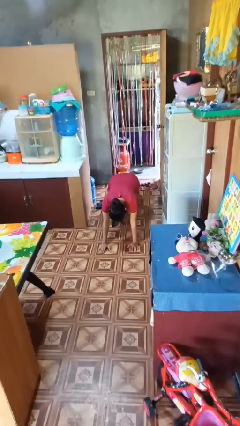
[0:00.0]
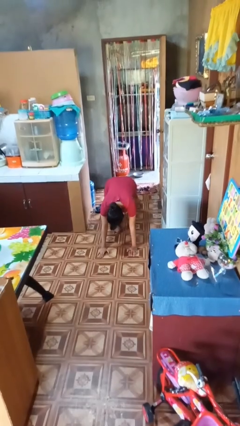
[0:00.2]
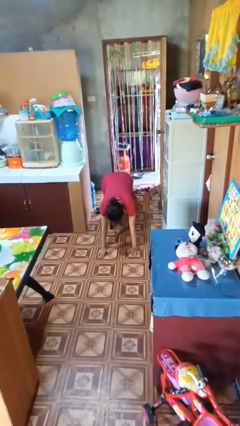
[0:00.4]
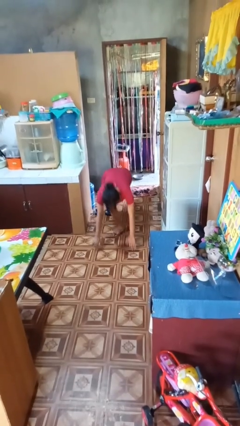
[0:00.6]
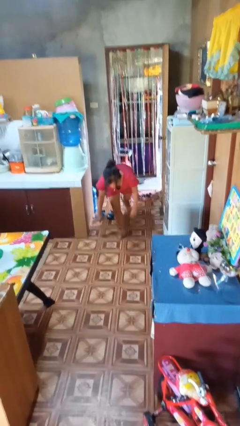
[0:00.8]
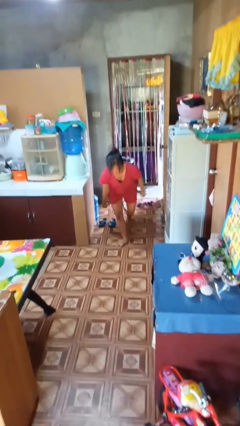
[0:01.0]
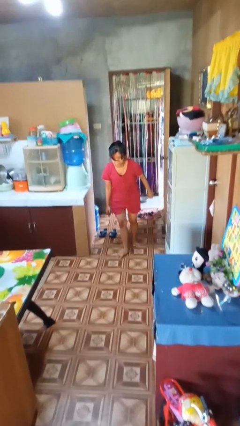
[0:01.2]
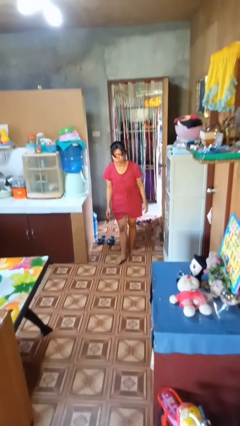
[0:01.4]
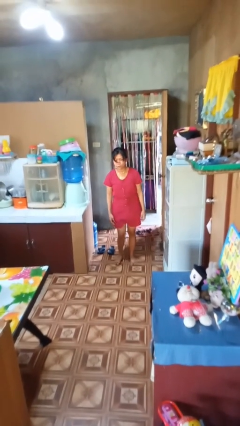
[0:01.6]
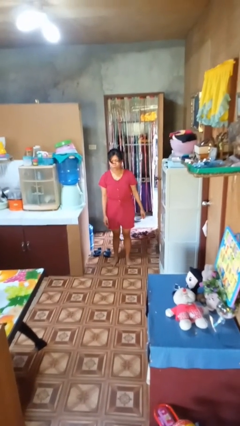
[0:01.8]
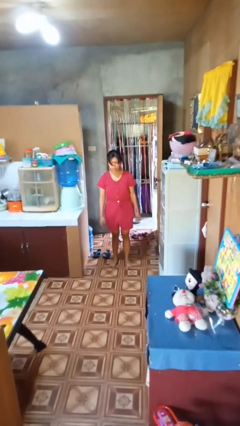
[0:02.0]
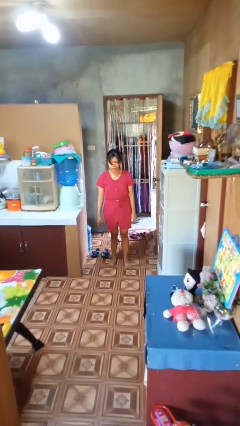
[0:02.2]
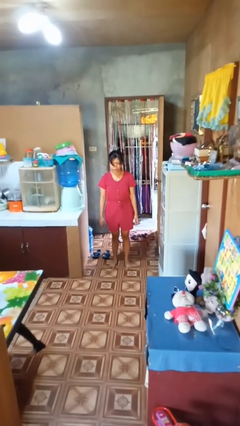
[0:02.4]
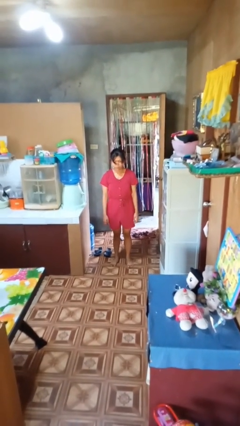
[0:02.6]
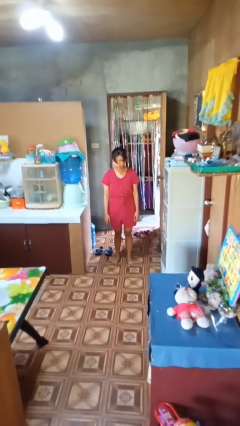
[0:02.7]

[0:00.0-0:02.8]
person stands up from floor

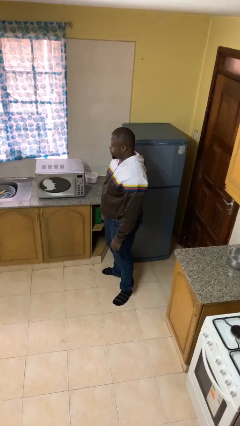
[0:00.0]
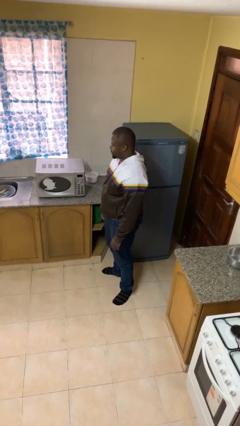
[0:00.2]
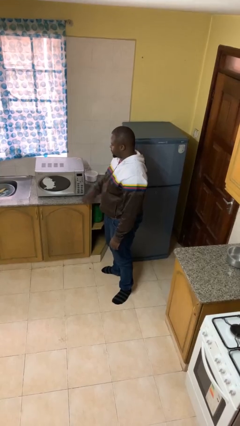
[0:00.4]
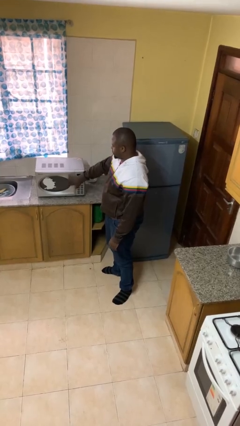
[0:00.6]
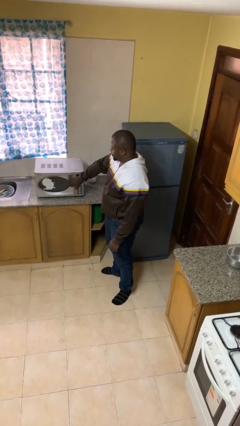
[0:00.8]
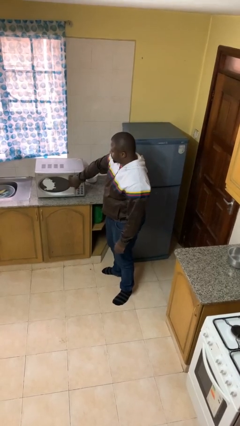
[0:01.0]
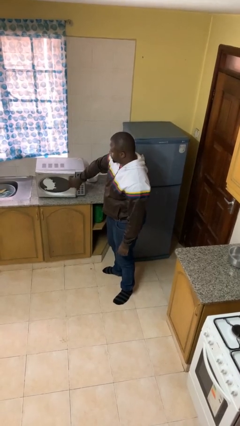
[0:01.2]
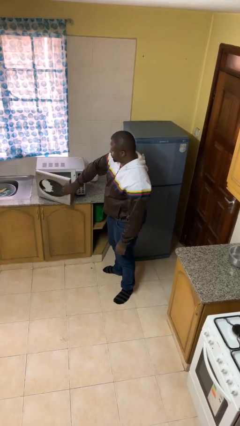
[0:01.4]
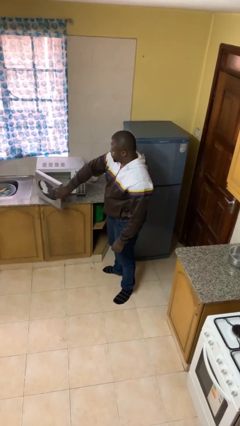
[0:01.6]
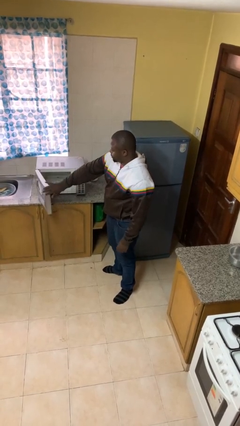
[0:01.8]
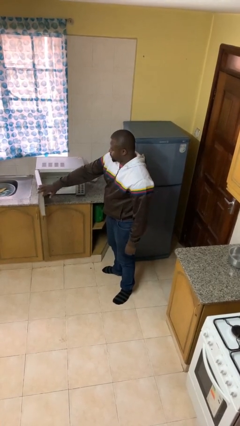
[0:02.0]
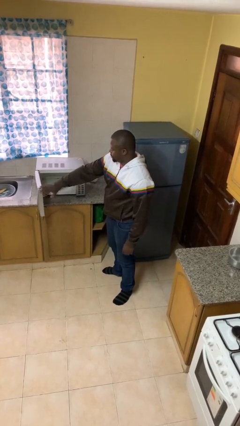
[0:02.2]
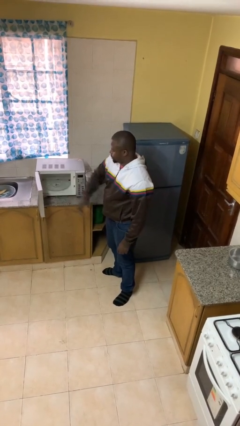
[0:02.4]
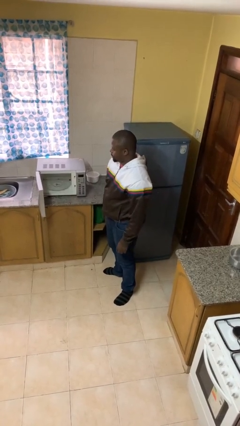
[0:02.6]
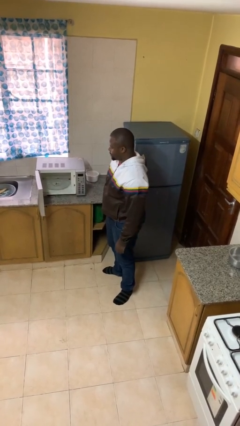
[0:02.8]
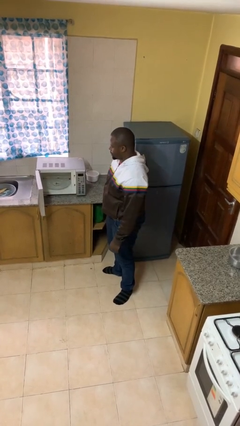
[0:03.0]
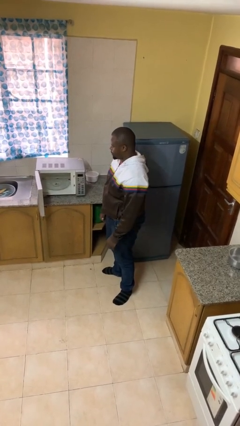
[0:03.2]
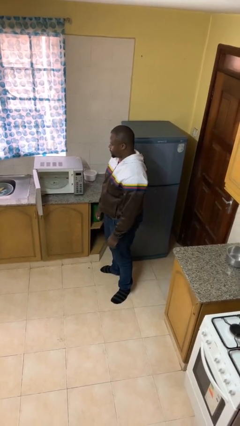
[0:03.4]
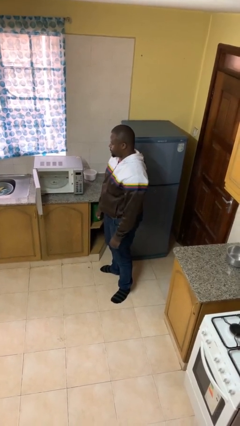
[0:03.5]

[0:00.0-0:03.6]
person opens microwave

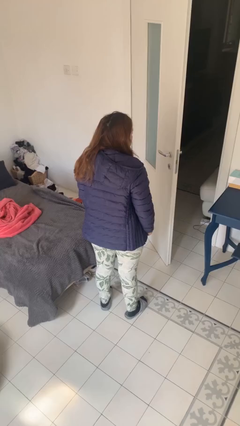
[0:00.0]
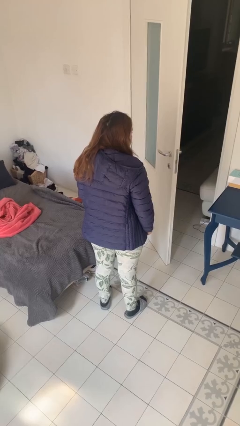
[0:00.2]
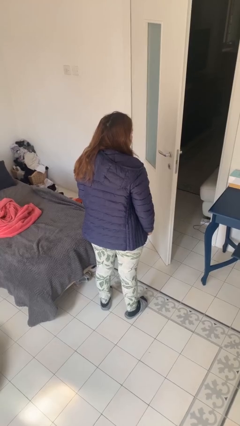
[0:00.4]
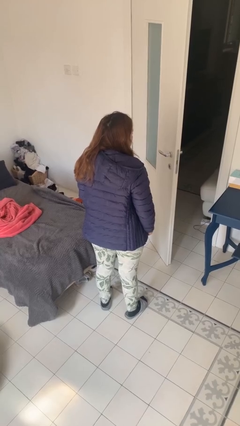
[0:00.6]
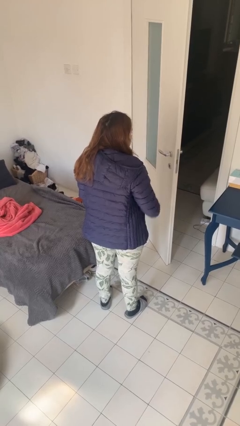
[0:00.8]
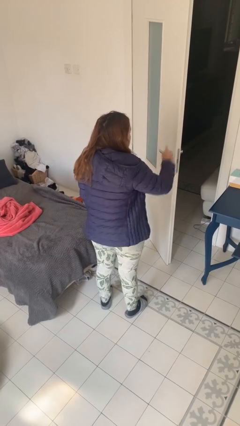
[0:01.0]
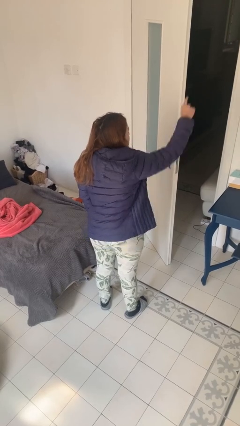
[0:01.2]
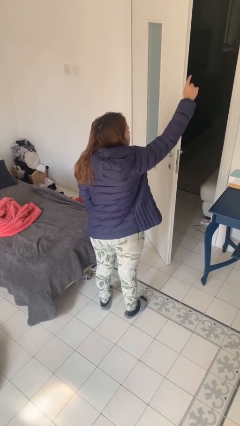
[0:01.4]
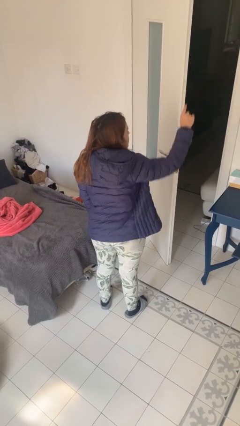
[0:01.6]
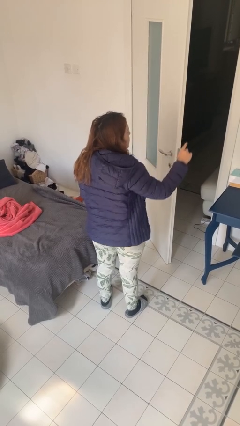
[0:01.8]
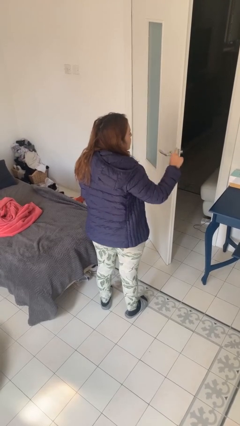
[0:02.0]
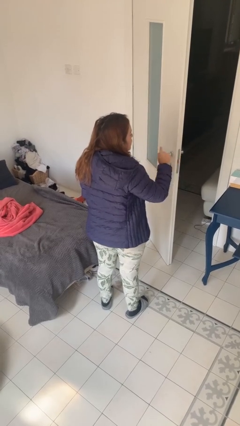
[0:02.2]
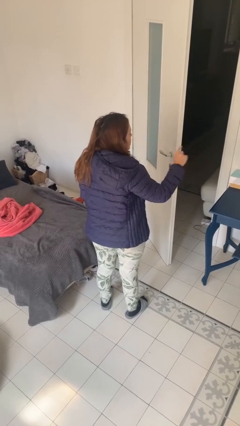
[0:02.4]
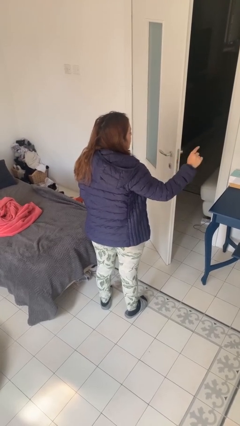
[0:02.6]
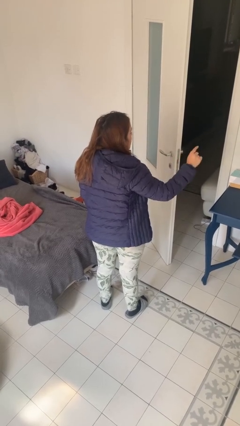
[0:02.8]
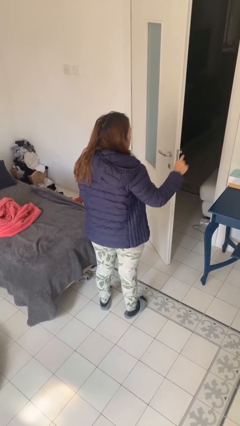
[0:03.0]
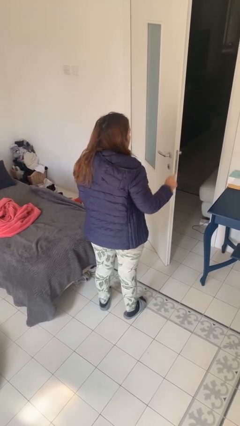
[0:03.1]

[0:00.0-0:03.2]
person gestures number one

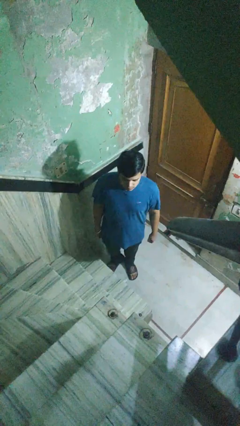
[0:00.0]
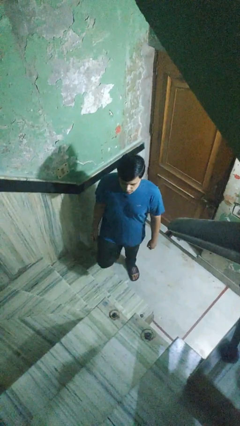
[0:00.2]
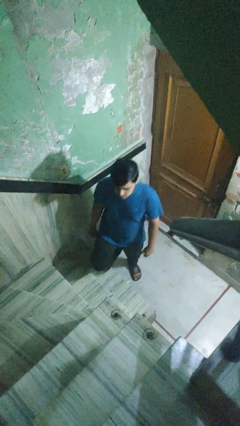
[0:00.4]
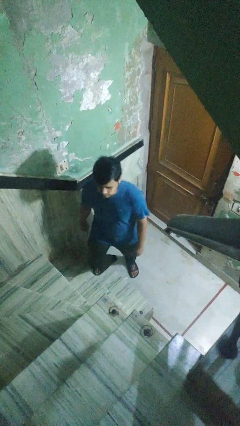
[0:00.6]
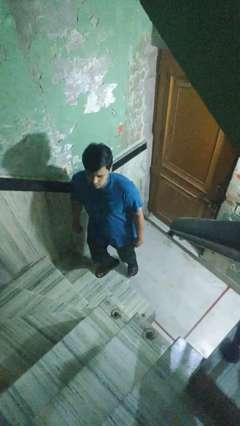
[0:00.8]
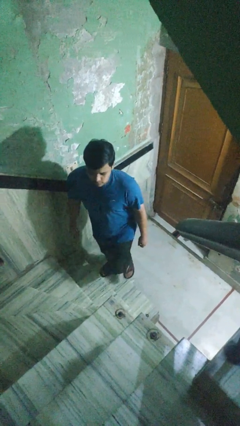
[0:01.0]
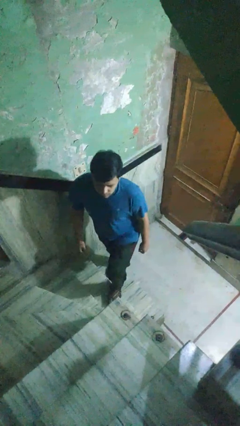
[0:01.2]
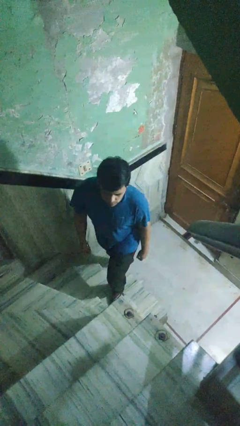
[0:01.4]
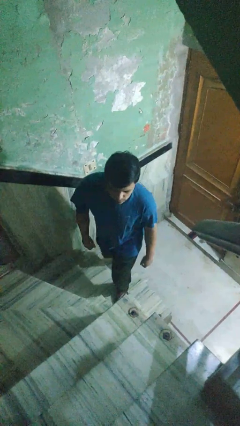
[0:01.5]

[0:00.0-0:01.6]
person climbs up stairs

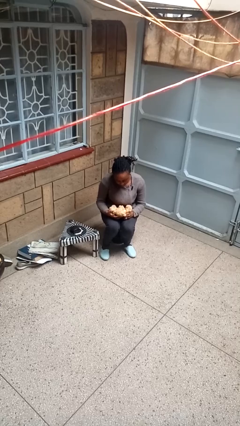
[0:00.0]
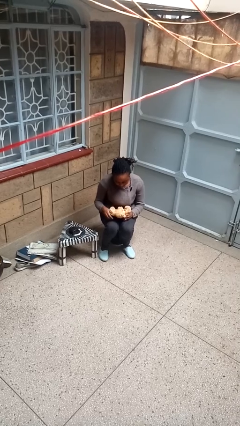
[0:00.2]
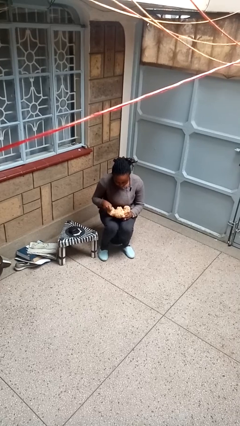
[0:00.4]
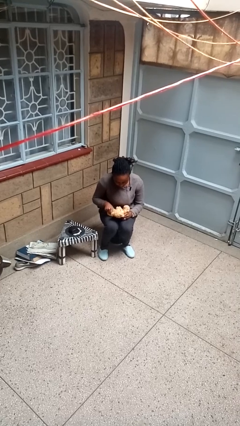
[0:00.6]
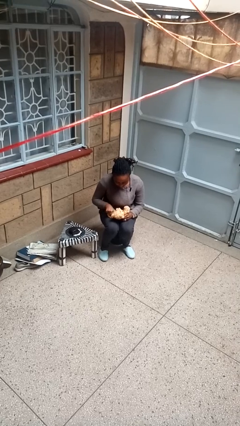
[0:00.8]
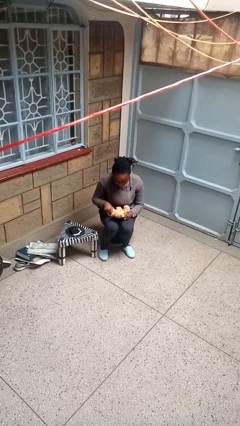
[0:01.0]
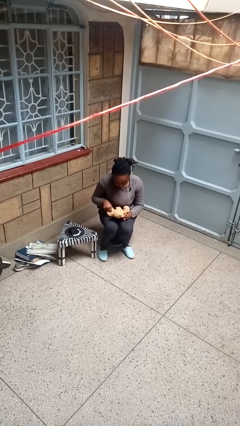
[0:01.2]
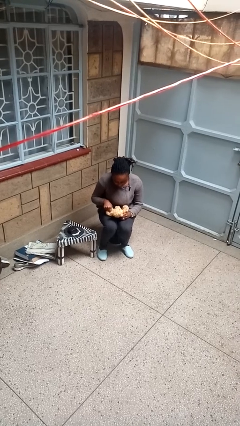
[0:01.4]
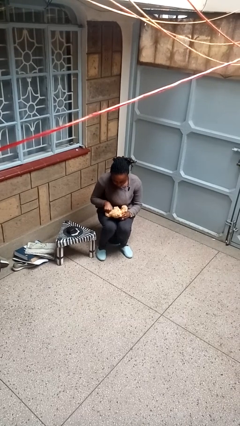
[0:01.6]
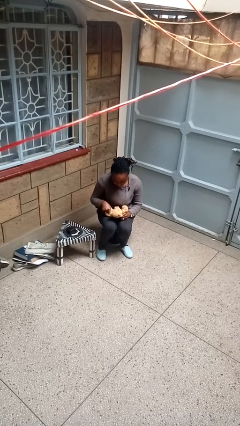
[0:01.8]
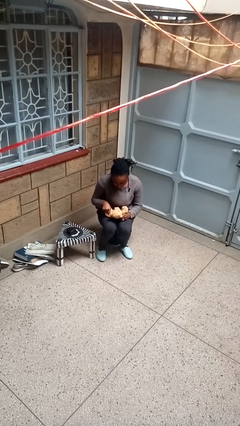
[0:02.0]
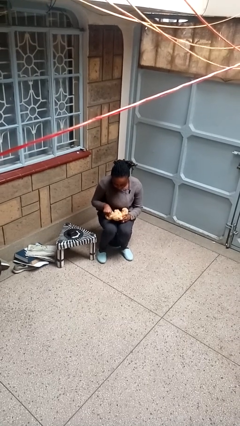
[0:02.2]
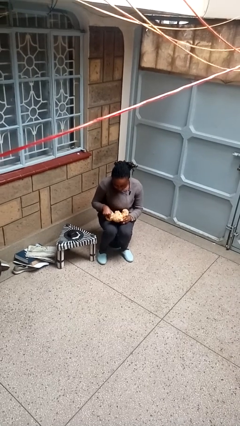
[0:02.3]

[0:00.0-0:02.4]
person squeezes object

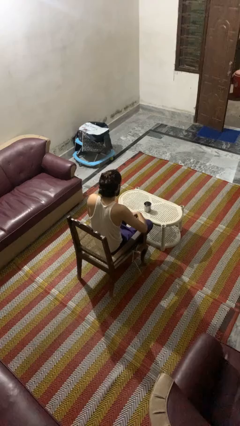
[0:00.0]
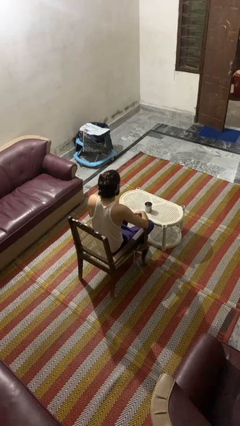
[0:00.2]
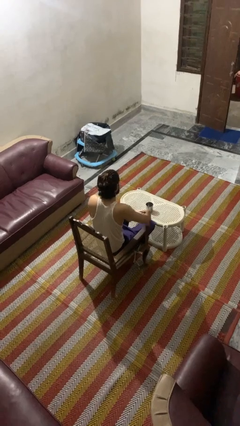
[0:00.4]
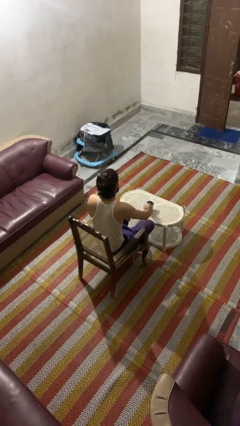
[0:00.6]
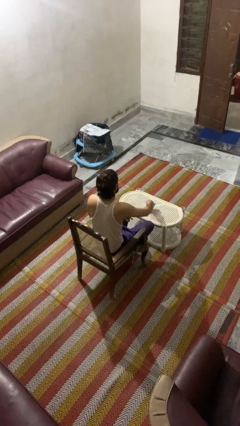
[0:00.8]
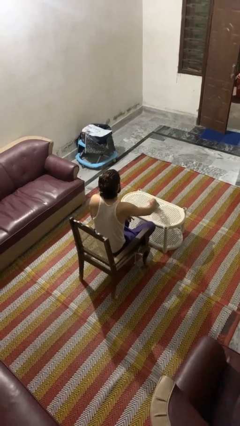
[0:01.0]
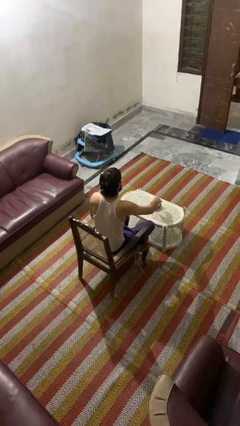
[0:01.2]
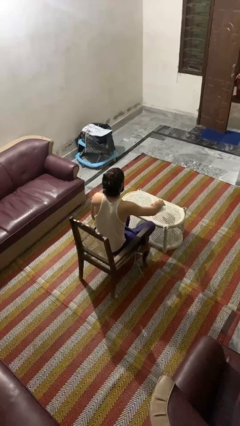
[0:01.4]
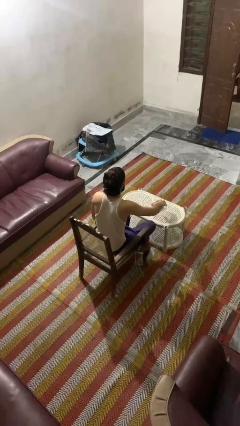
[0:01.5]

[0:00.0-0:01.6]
person knocks over furniture

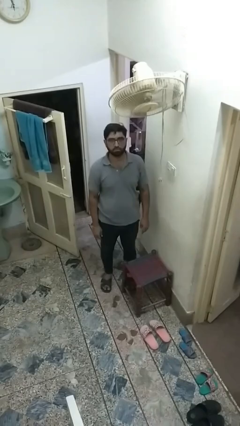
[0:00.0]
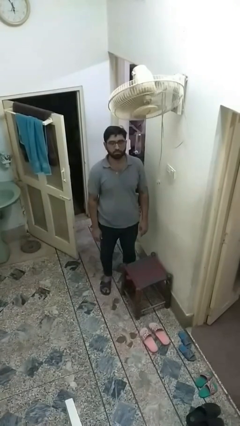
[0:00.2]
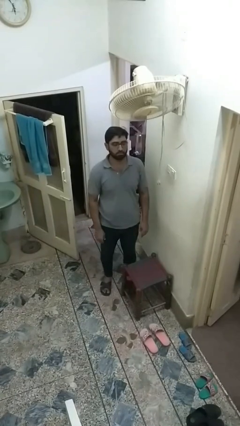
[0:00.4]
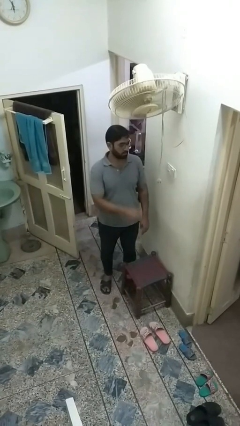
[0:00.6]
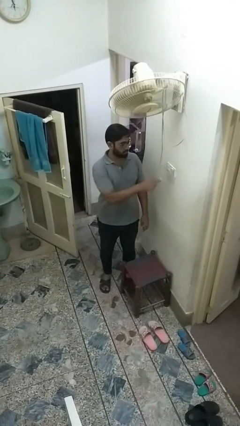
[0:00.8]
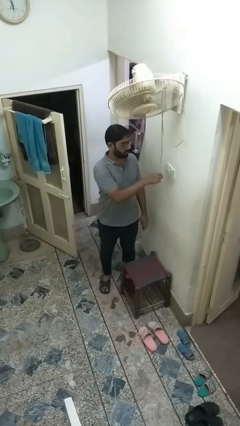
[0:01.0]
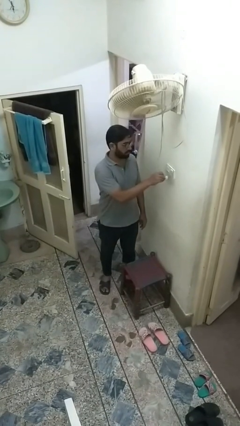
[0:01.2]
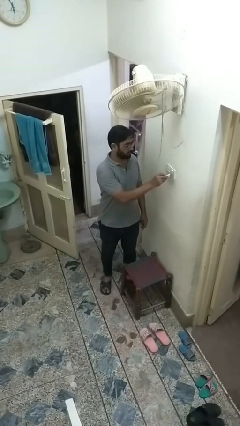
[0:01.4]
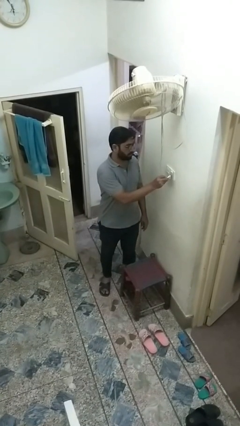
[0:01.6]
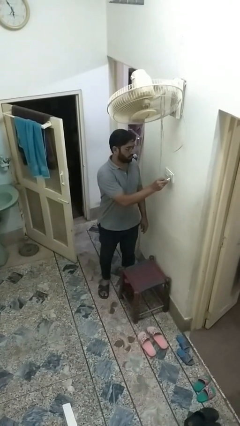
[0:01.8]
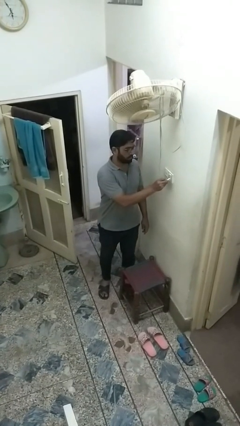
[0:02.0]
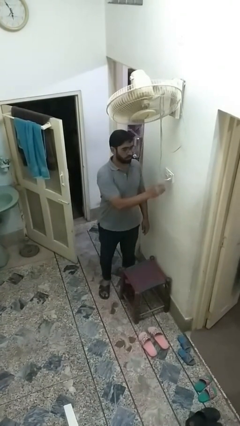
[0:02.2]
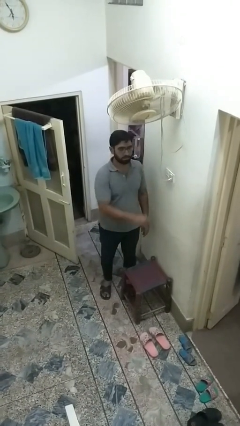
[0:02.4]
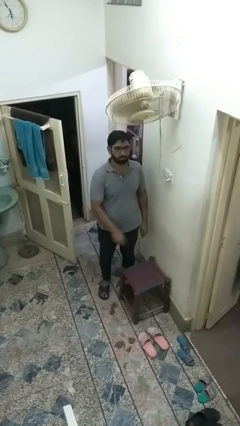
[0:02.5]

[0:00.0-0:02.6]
person plugs into electrical socket
